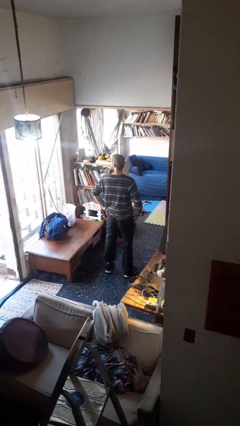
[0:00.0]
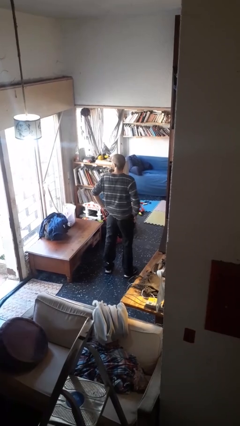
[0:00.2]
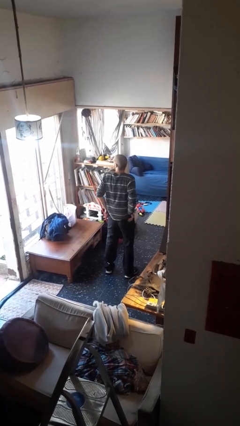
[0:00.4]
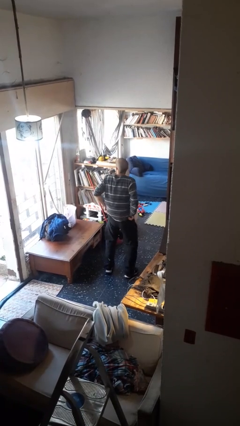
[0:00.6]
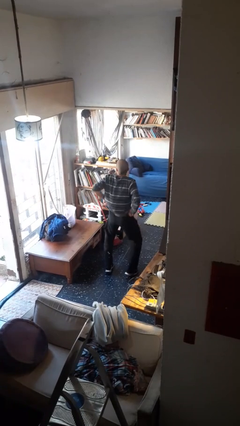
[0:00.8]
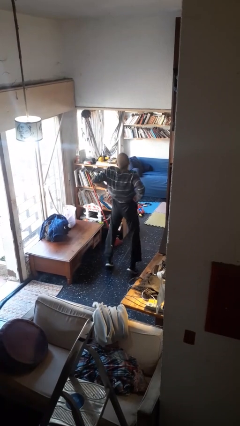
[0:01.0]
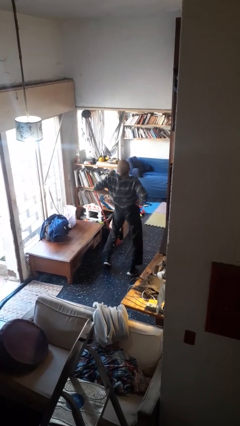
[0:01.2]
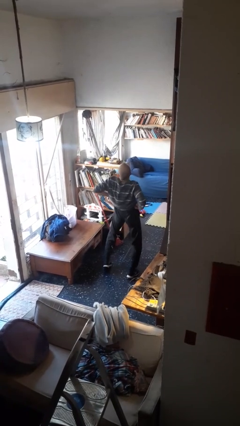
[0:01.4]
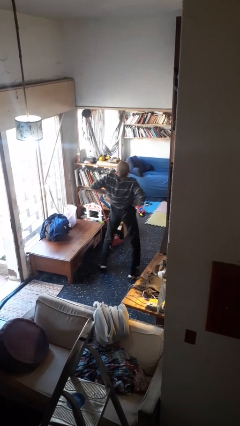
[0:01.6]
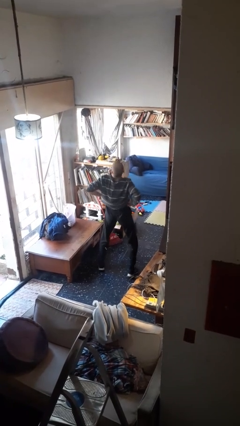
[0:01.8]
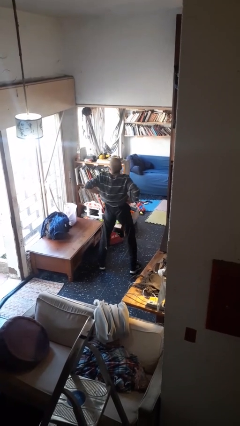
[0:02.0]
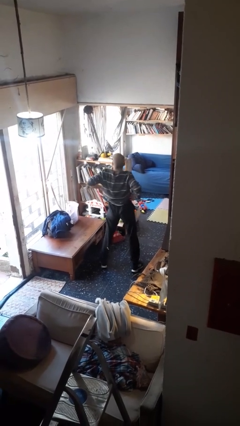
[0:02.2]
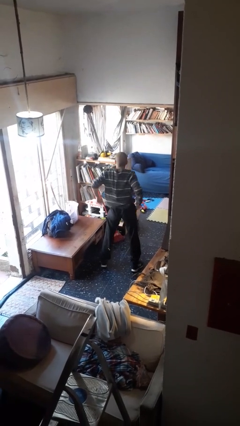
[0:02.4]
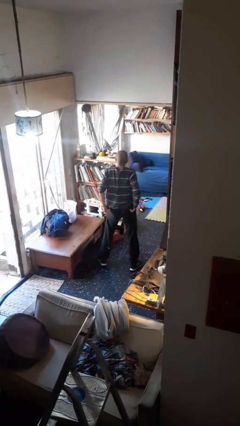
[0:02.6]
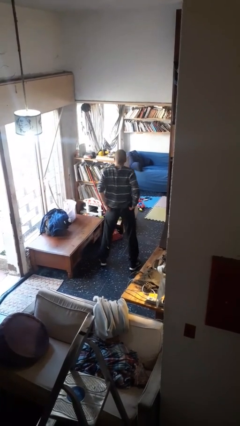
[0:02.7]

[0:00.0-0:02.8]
person hikes up pants

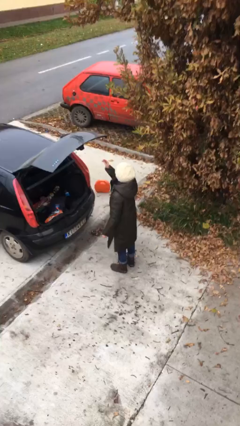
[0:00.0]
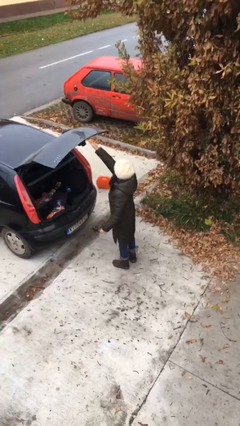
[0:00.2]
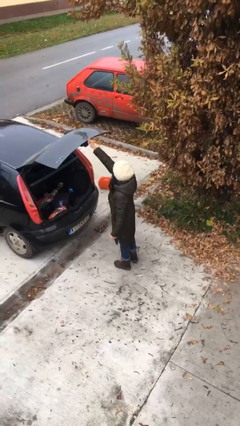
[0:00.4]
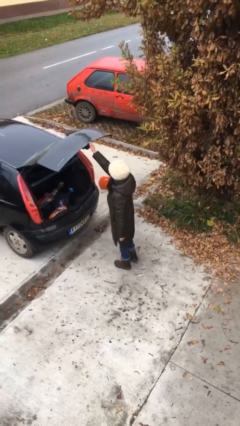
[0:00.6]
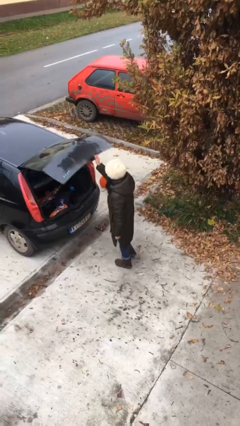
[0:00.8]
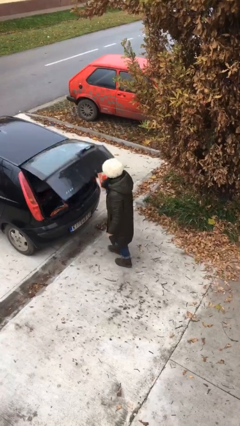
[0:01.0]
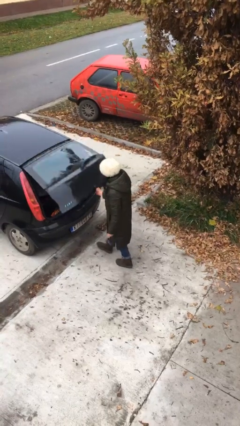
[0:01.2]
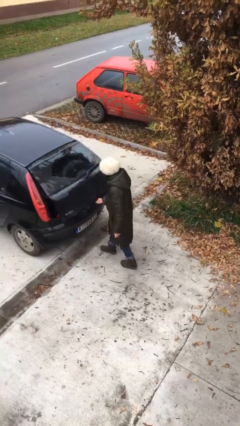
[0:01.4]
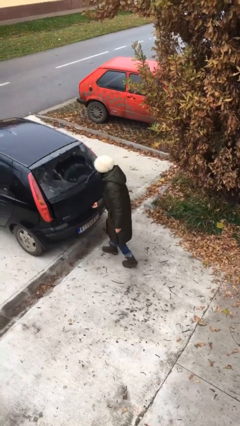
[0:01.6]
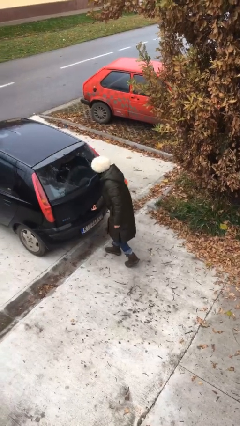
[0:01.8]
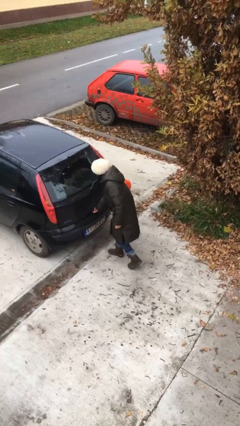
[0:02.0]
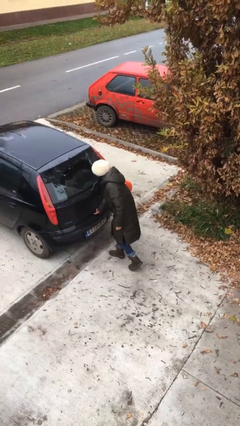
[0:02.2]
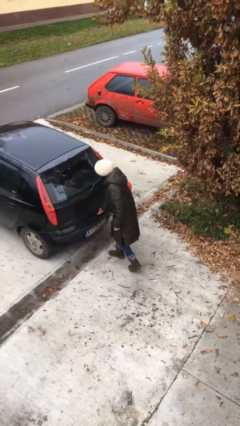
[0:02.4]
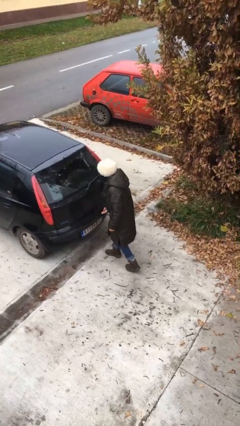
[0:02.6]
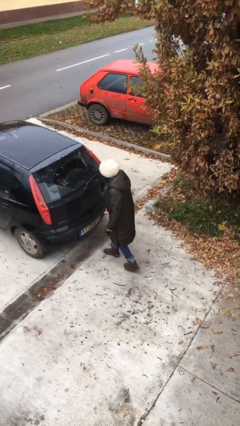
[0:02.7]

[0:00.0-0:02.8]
person closes car trunk

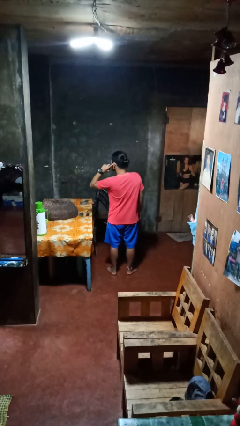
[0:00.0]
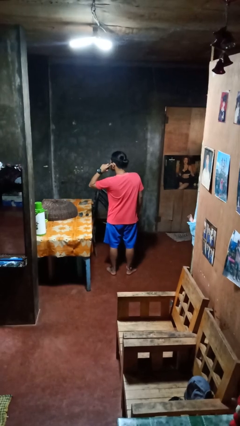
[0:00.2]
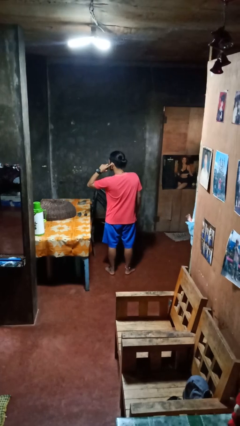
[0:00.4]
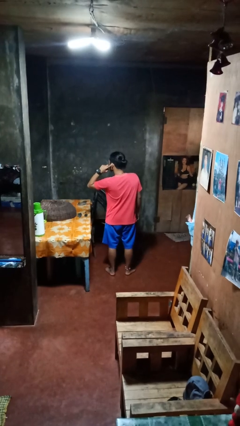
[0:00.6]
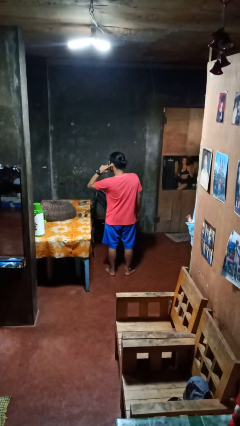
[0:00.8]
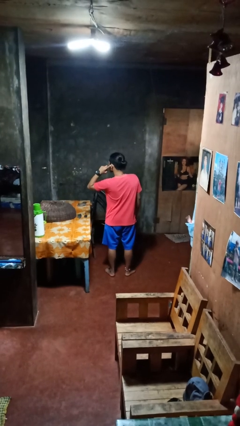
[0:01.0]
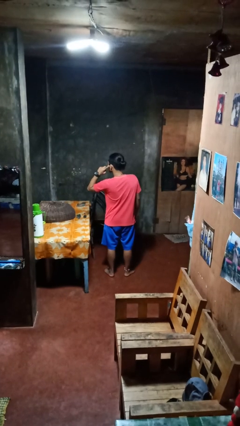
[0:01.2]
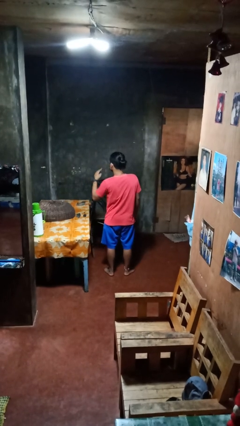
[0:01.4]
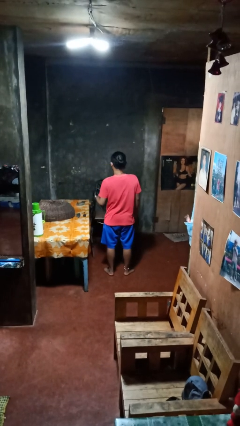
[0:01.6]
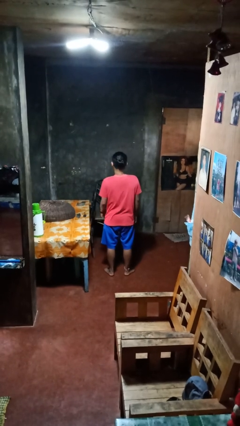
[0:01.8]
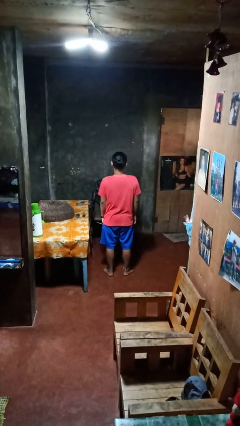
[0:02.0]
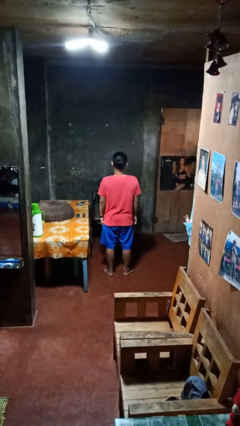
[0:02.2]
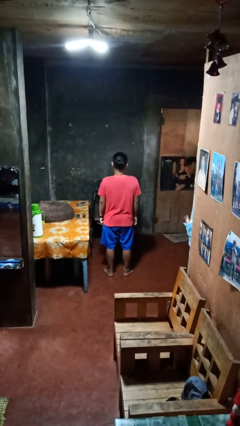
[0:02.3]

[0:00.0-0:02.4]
person gestures listen closely

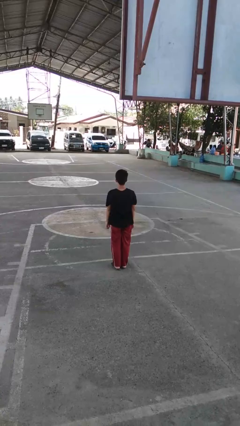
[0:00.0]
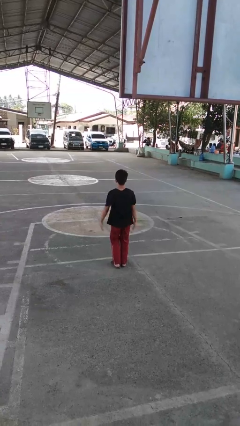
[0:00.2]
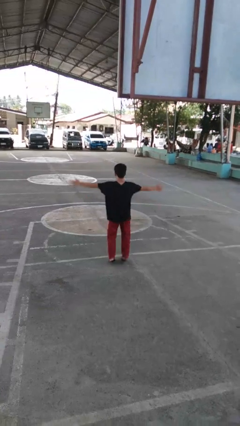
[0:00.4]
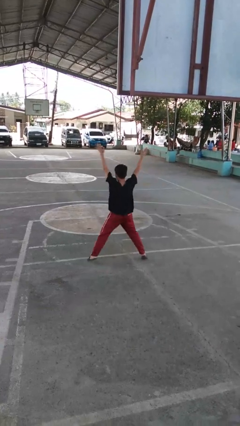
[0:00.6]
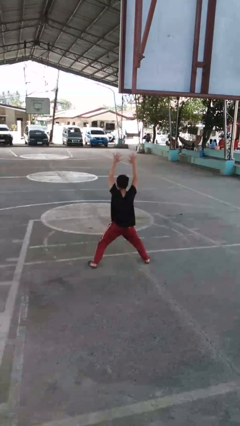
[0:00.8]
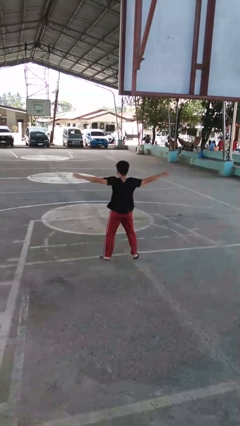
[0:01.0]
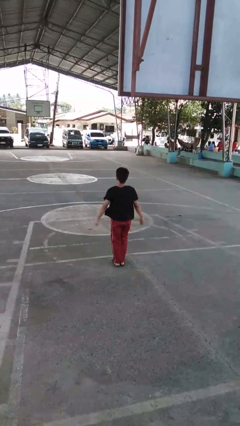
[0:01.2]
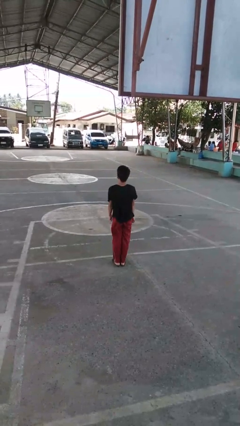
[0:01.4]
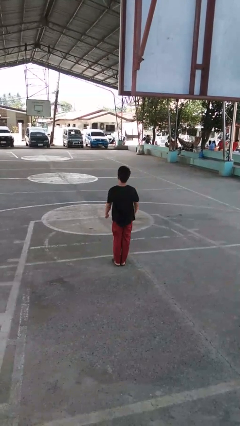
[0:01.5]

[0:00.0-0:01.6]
person exercises with jumping jacks

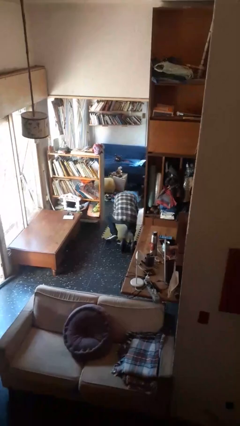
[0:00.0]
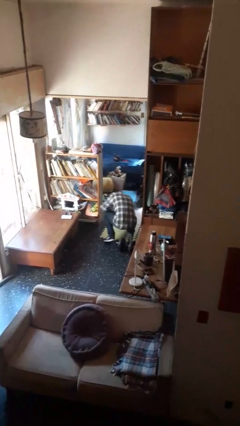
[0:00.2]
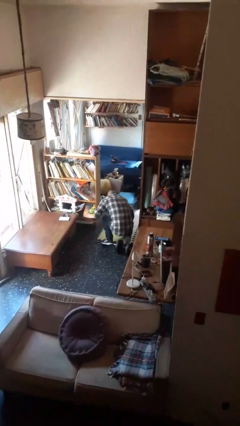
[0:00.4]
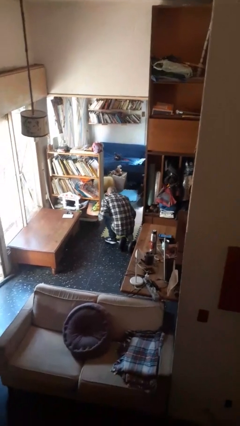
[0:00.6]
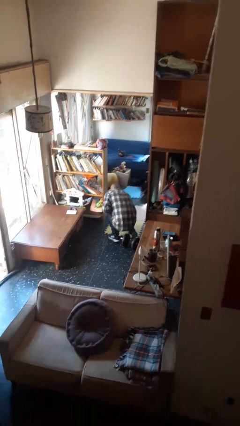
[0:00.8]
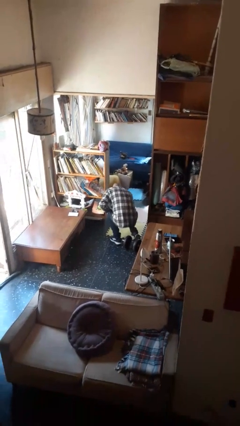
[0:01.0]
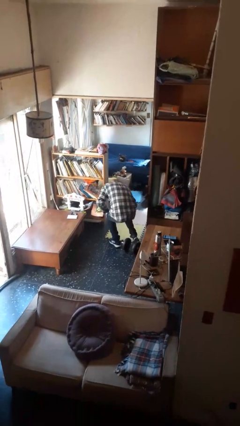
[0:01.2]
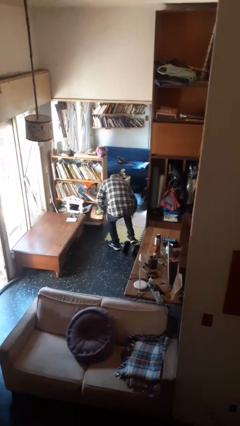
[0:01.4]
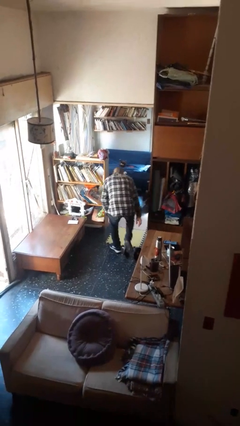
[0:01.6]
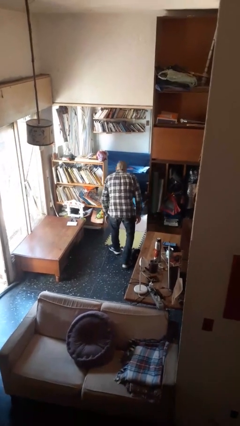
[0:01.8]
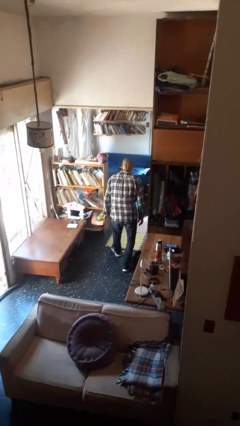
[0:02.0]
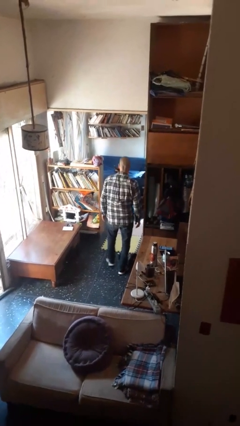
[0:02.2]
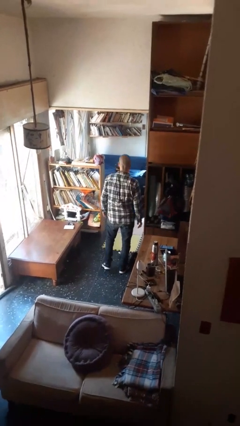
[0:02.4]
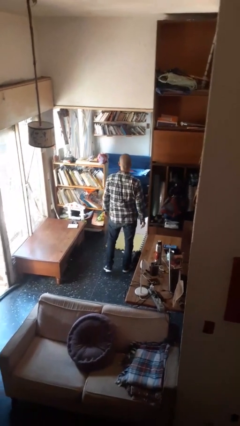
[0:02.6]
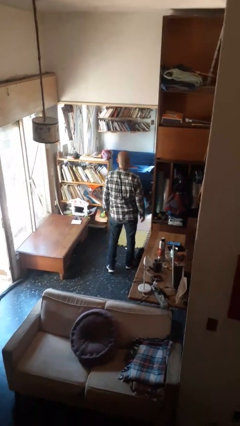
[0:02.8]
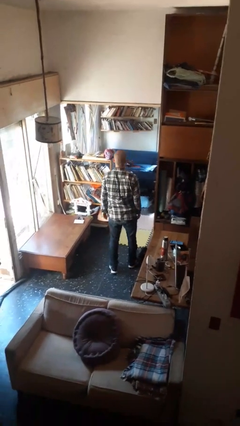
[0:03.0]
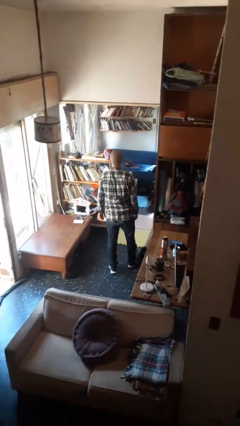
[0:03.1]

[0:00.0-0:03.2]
person stands up from floor

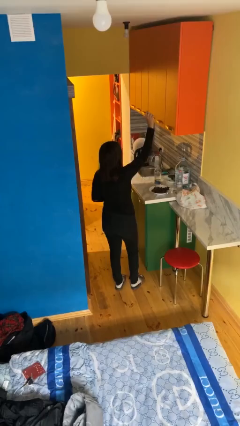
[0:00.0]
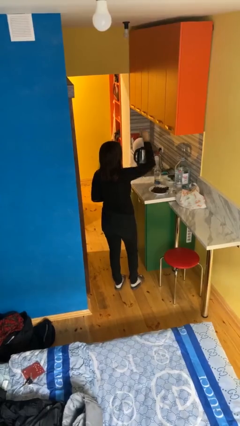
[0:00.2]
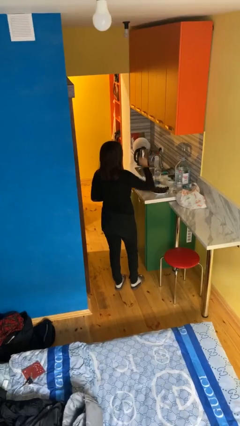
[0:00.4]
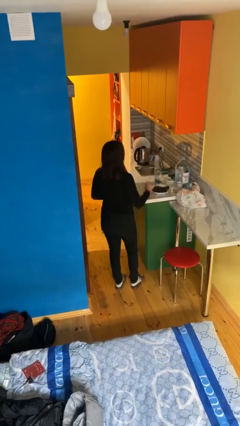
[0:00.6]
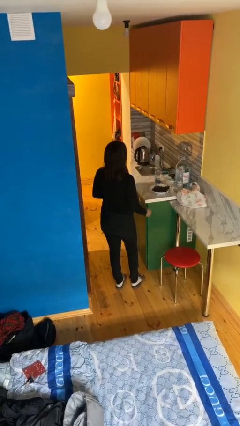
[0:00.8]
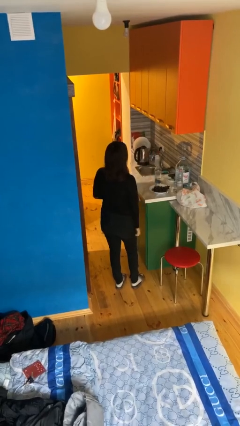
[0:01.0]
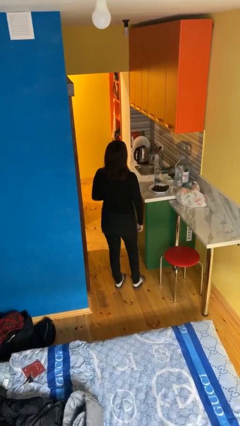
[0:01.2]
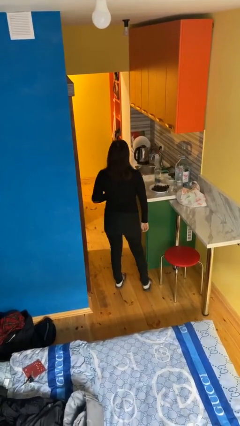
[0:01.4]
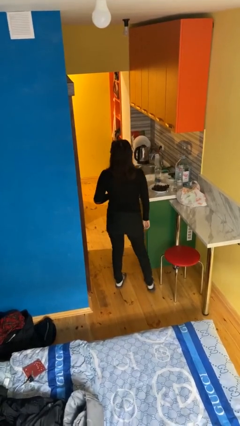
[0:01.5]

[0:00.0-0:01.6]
person gestures lower hand

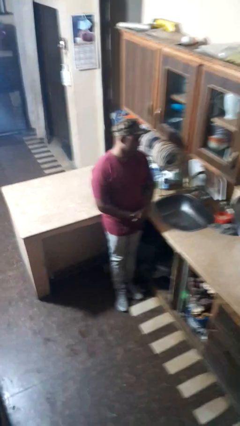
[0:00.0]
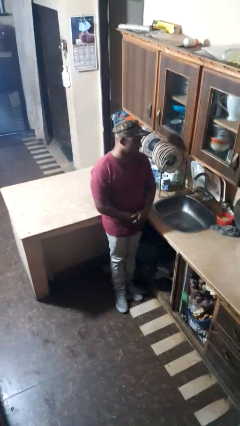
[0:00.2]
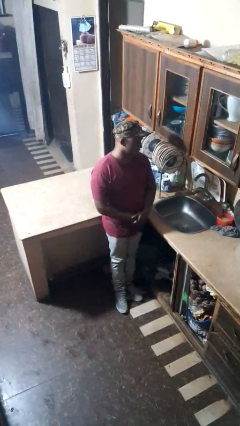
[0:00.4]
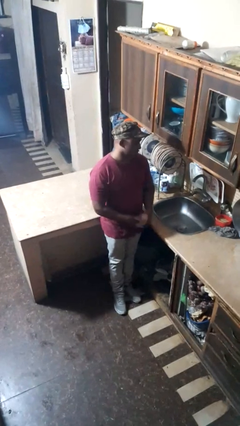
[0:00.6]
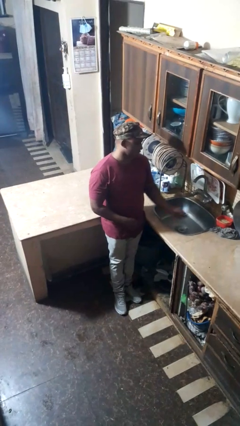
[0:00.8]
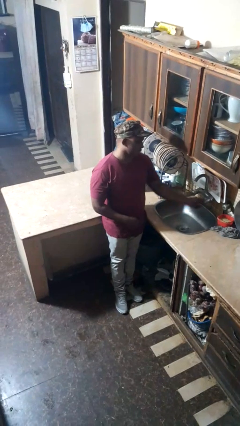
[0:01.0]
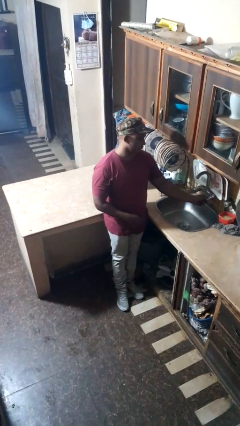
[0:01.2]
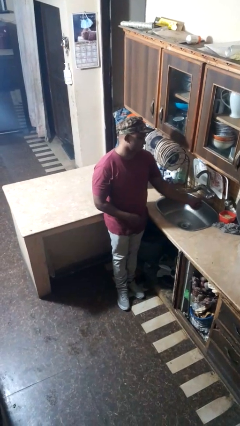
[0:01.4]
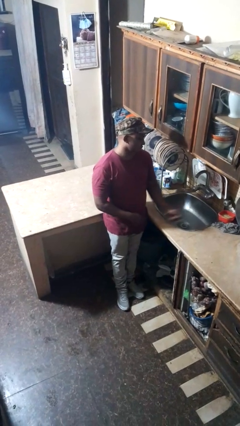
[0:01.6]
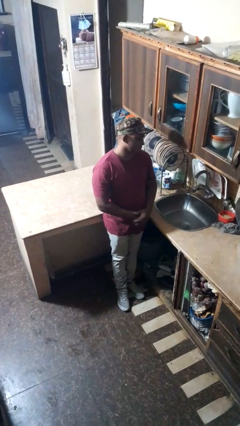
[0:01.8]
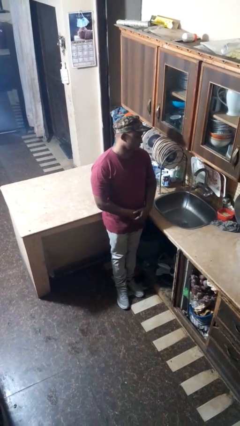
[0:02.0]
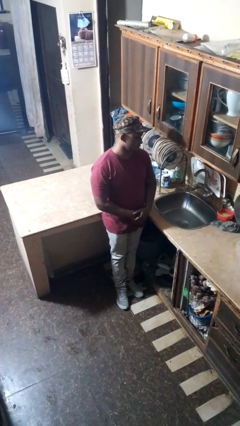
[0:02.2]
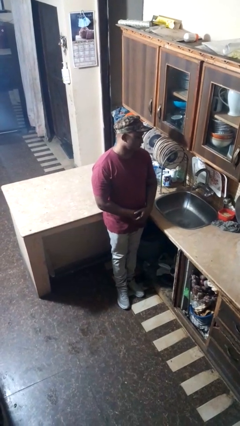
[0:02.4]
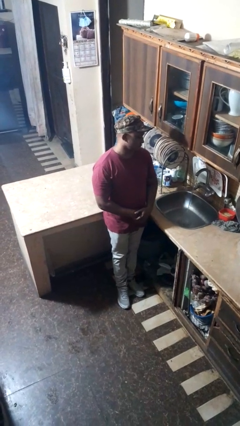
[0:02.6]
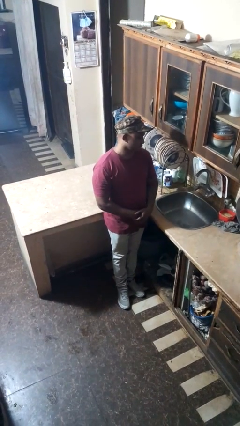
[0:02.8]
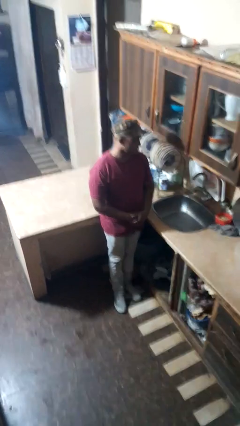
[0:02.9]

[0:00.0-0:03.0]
person turns on faucet
